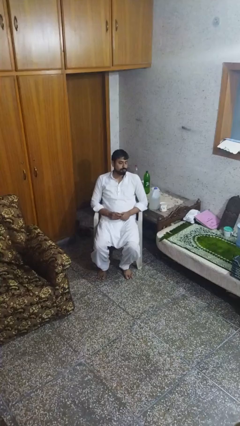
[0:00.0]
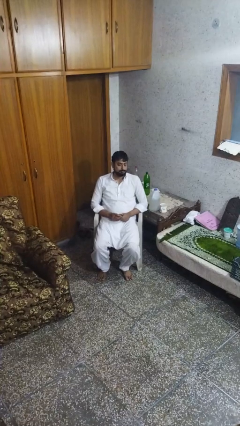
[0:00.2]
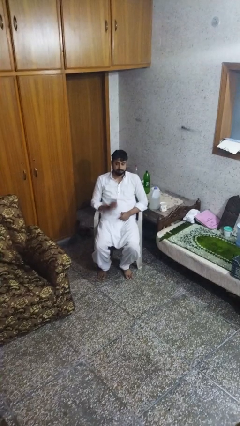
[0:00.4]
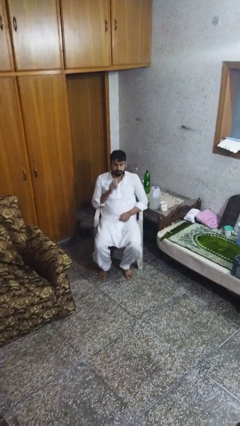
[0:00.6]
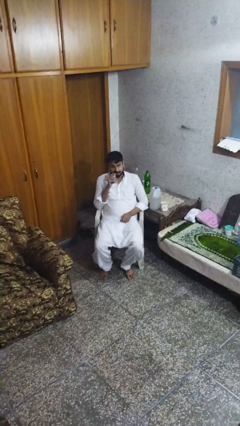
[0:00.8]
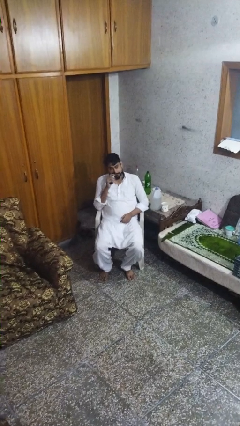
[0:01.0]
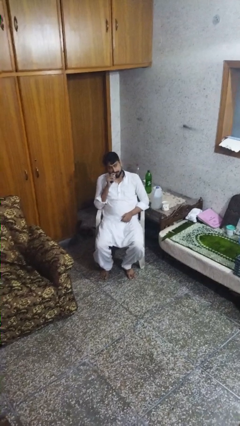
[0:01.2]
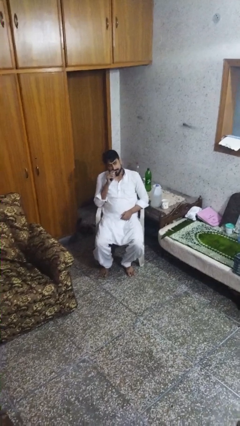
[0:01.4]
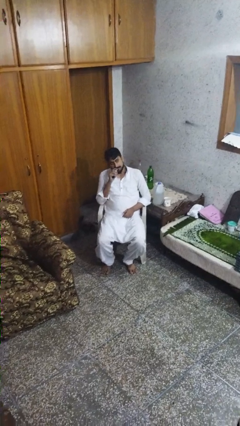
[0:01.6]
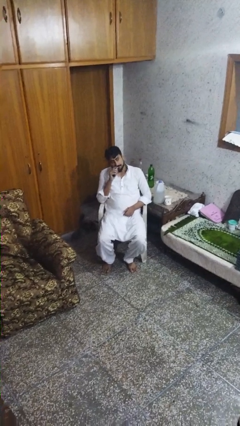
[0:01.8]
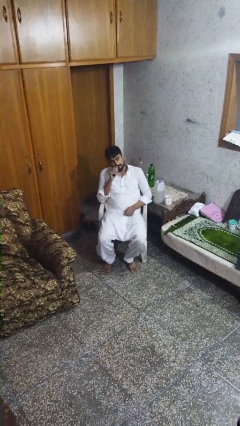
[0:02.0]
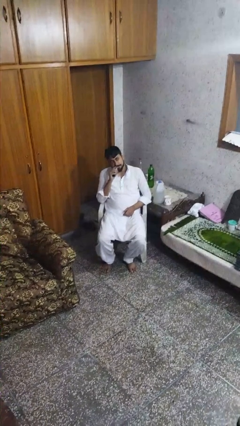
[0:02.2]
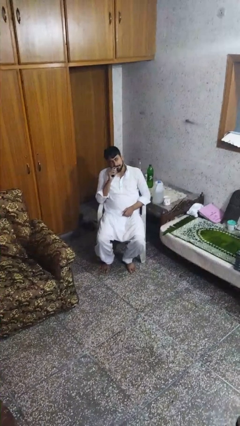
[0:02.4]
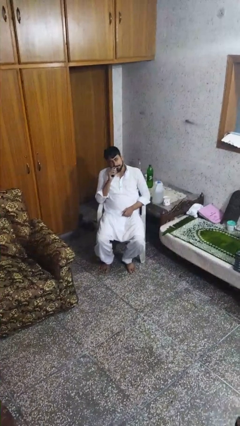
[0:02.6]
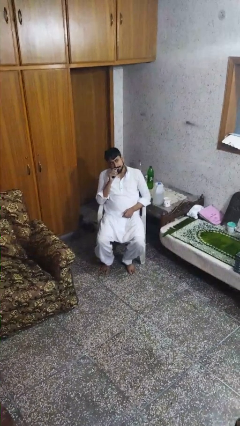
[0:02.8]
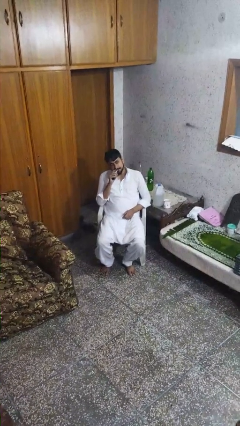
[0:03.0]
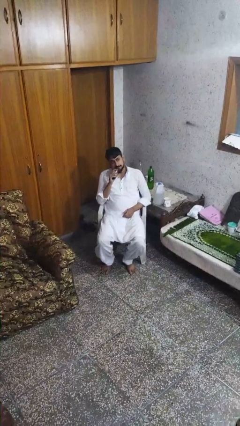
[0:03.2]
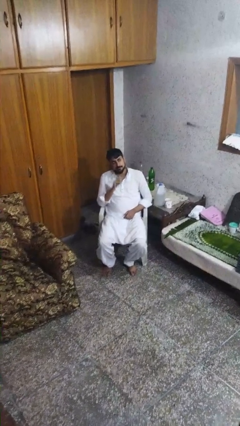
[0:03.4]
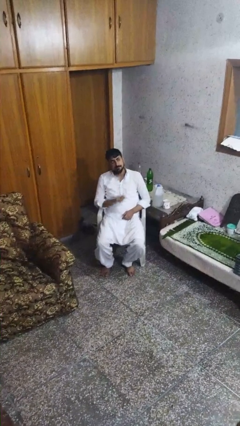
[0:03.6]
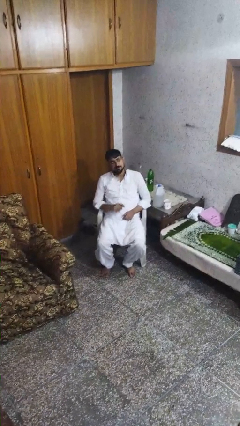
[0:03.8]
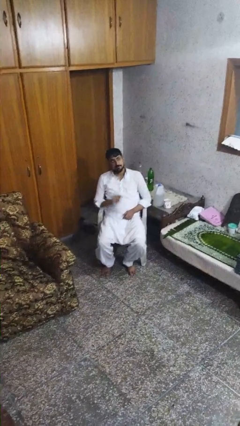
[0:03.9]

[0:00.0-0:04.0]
person vapes

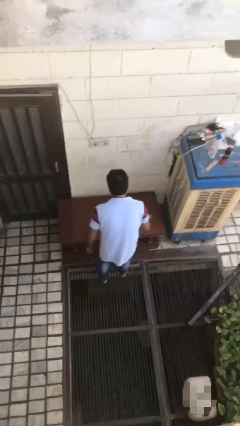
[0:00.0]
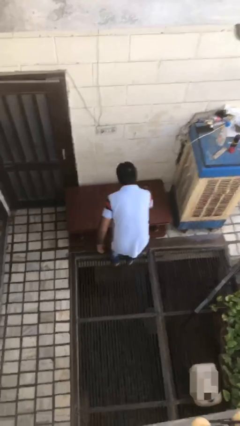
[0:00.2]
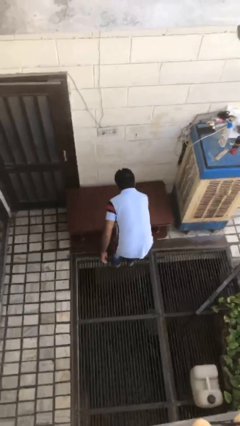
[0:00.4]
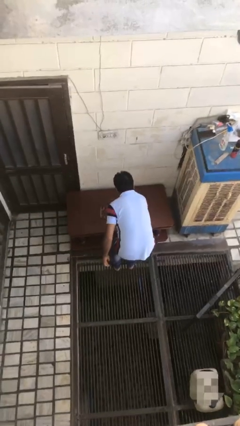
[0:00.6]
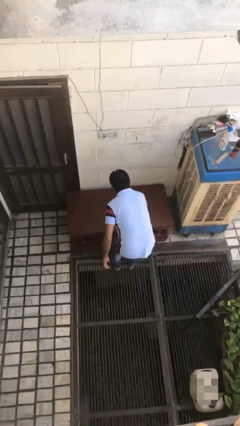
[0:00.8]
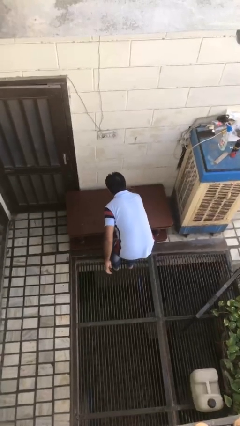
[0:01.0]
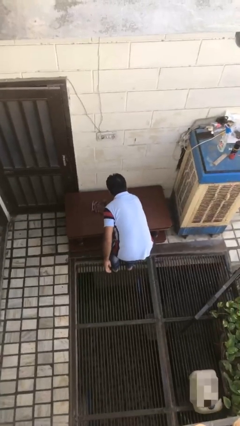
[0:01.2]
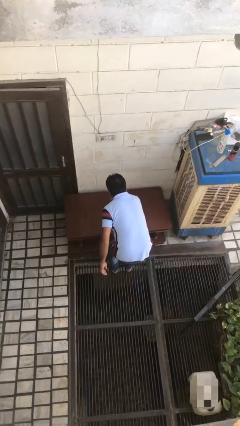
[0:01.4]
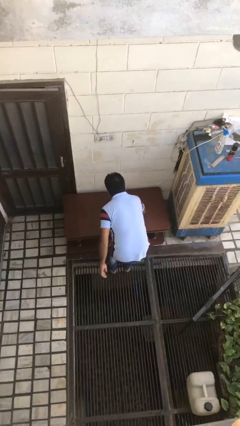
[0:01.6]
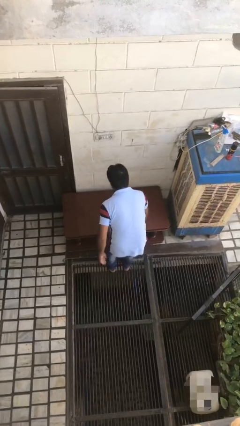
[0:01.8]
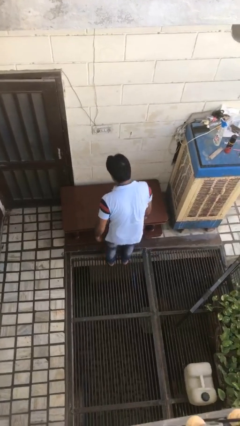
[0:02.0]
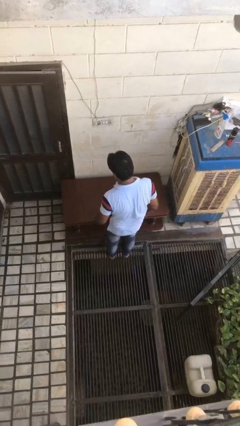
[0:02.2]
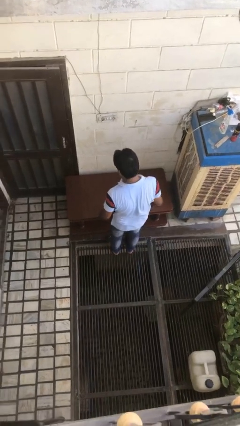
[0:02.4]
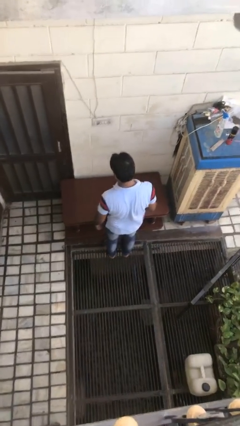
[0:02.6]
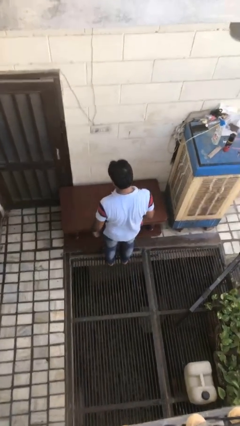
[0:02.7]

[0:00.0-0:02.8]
person cleans table with rag

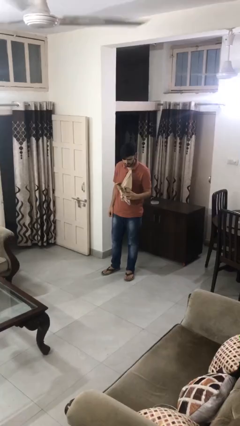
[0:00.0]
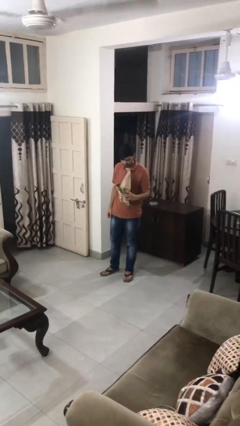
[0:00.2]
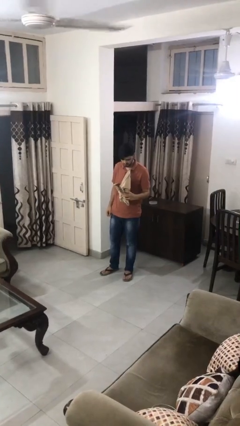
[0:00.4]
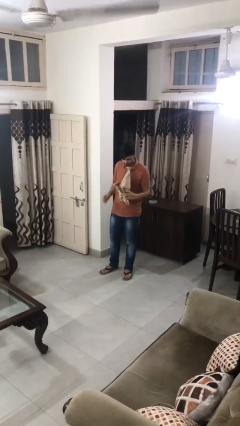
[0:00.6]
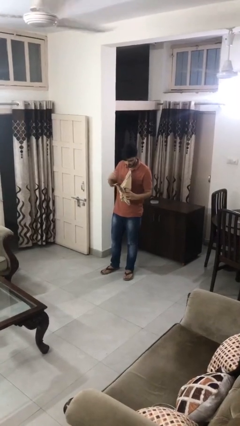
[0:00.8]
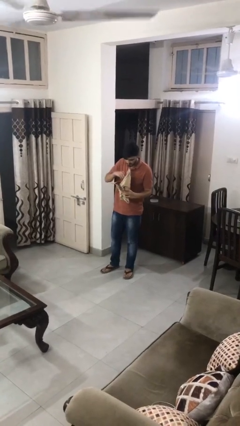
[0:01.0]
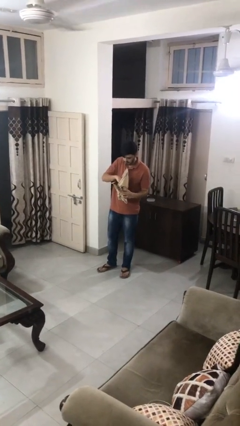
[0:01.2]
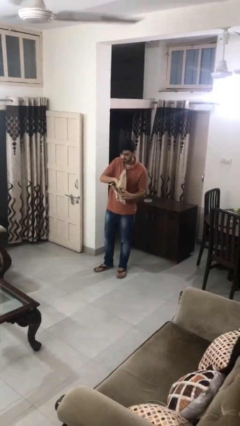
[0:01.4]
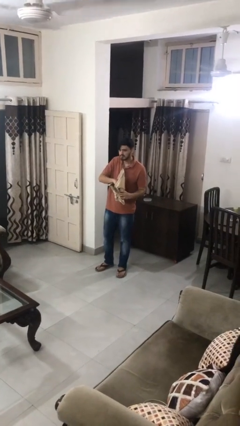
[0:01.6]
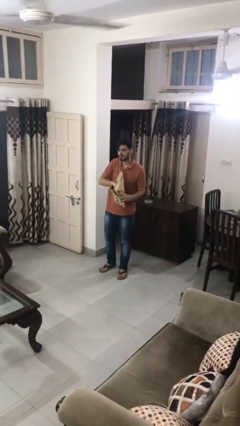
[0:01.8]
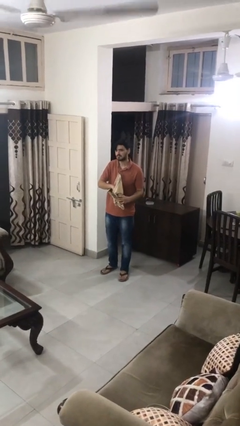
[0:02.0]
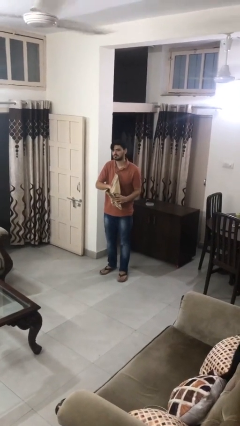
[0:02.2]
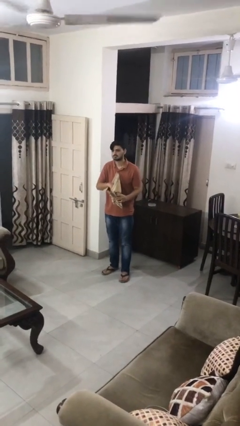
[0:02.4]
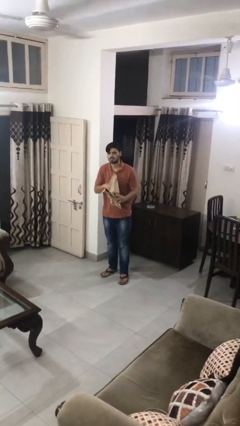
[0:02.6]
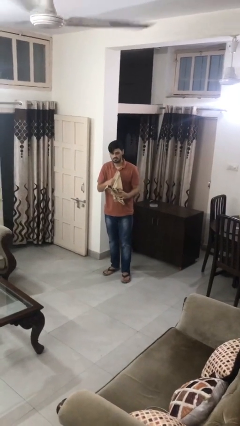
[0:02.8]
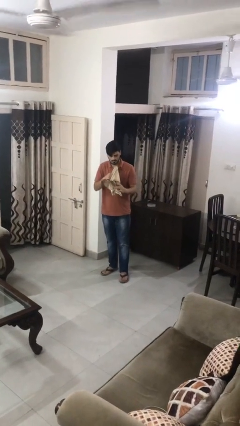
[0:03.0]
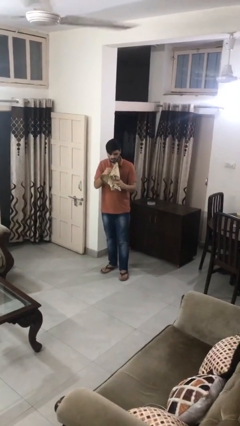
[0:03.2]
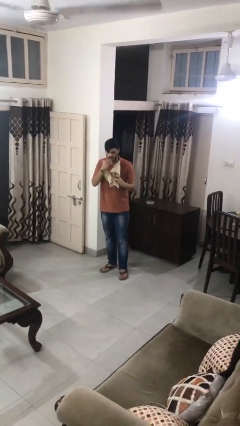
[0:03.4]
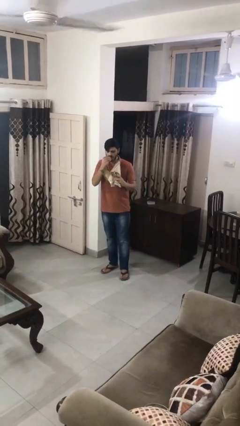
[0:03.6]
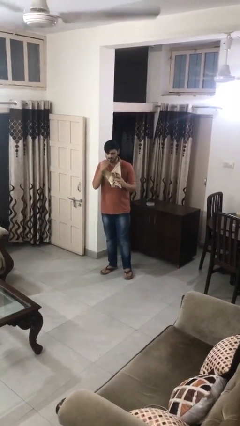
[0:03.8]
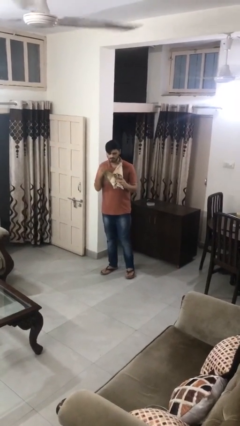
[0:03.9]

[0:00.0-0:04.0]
person eats snack from bag

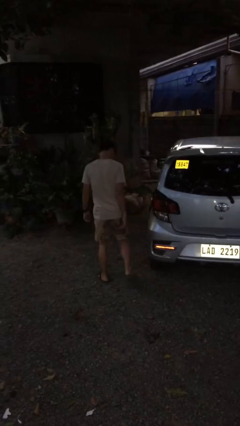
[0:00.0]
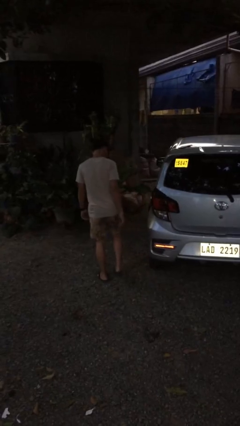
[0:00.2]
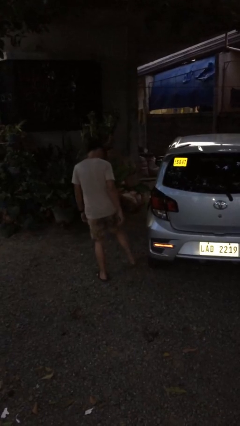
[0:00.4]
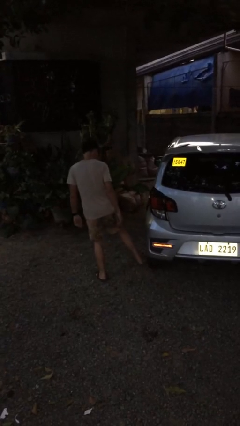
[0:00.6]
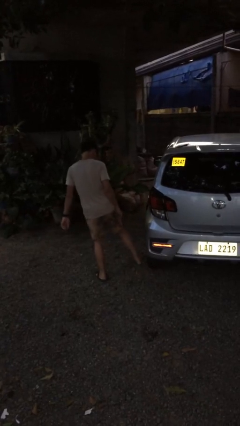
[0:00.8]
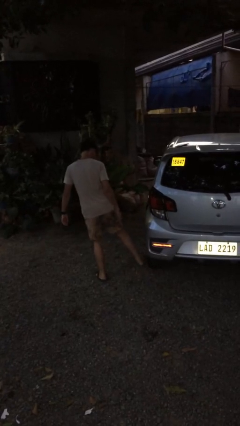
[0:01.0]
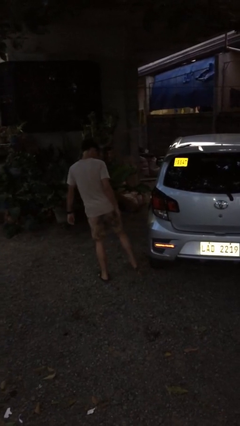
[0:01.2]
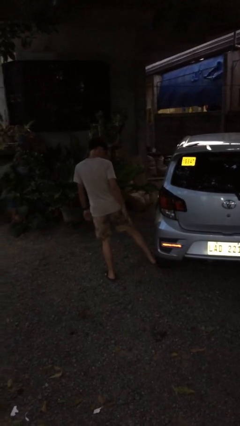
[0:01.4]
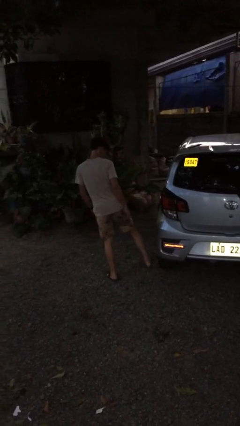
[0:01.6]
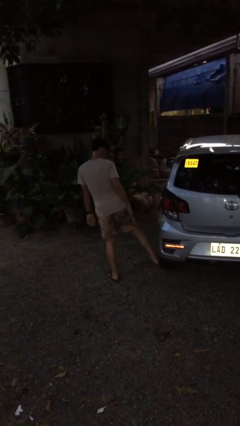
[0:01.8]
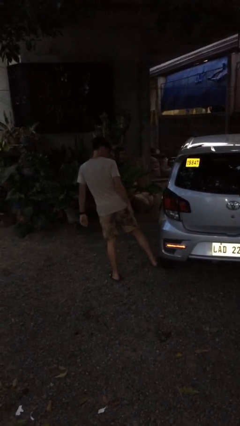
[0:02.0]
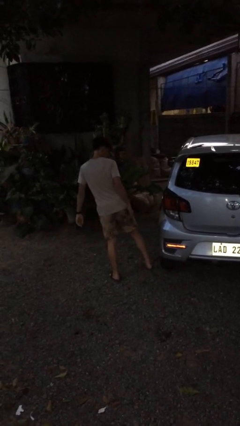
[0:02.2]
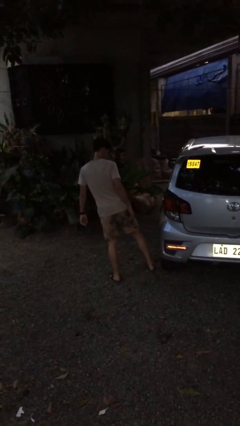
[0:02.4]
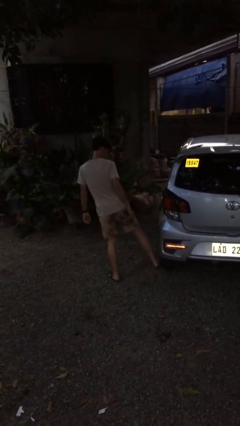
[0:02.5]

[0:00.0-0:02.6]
person kicks car tires

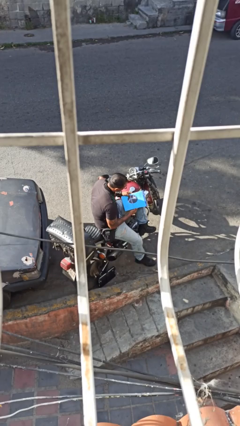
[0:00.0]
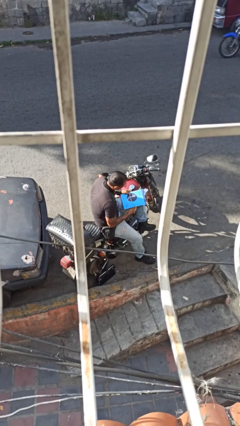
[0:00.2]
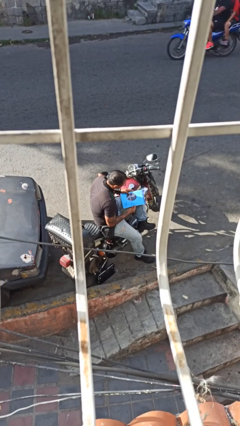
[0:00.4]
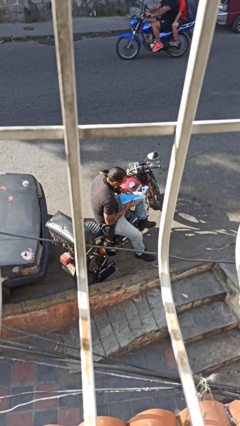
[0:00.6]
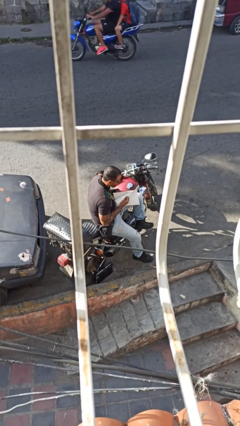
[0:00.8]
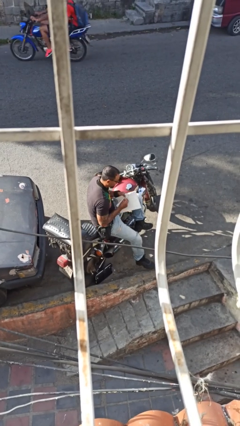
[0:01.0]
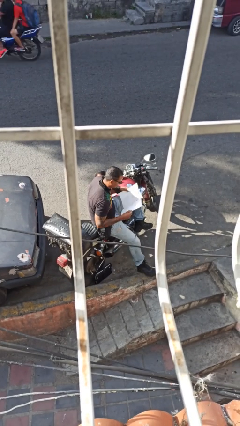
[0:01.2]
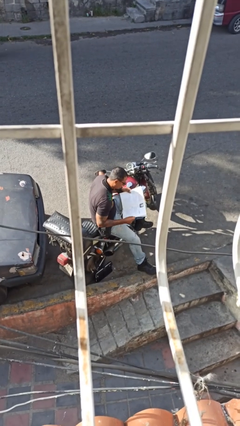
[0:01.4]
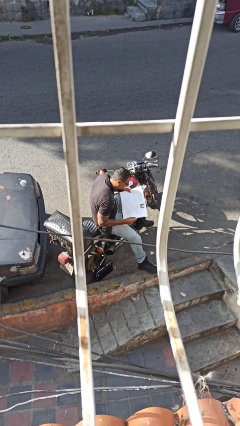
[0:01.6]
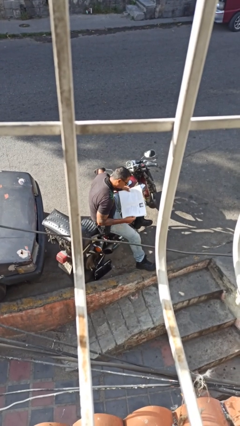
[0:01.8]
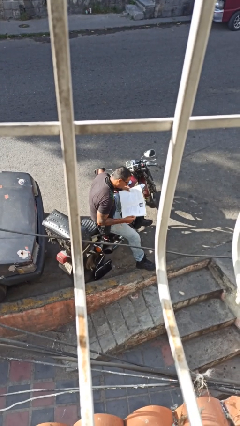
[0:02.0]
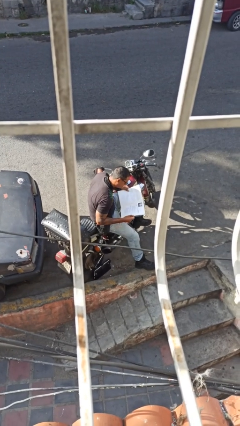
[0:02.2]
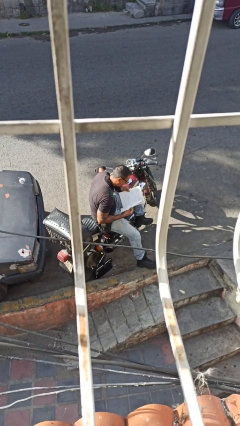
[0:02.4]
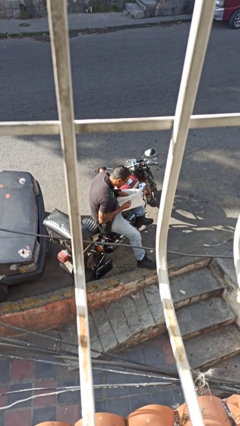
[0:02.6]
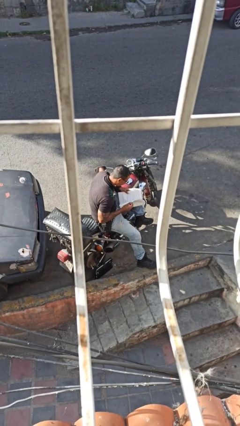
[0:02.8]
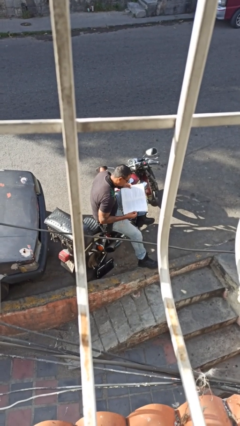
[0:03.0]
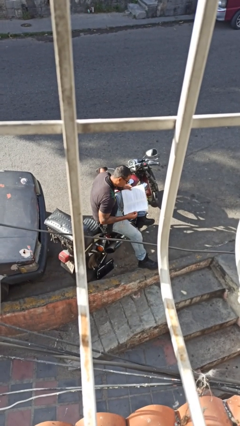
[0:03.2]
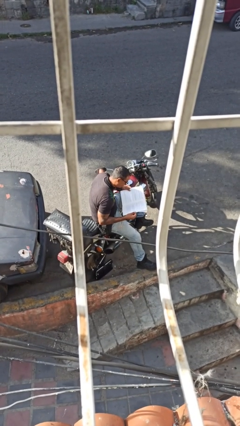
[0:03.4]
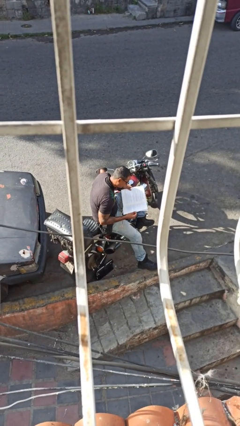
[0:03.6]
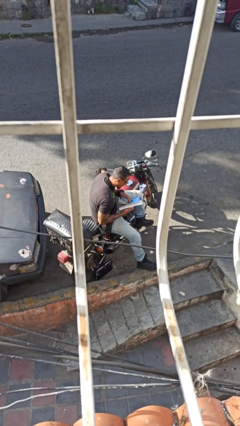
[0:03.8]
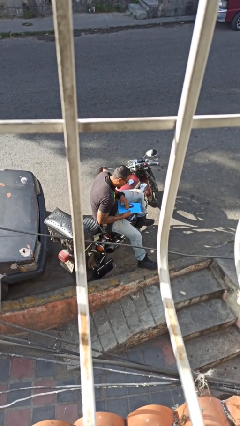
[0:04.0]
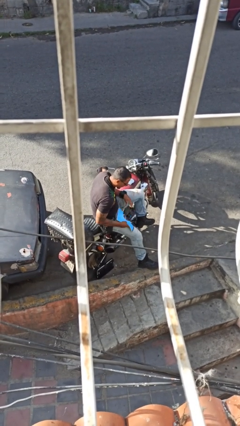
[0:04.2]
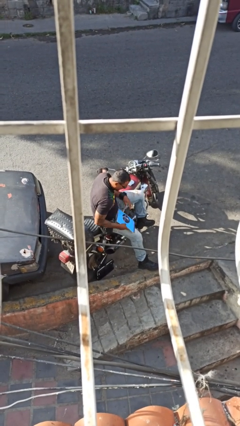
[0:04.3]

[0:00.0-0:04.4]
person reads document
